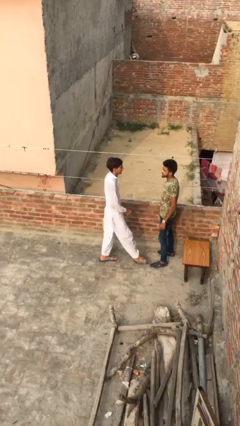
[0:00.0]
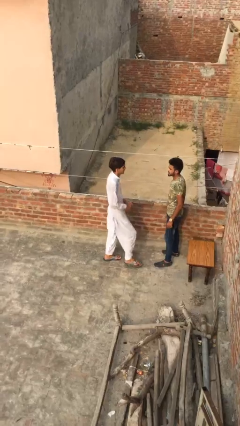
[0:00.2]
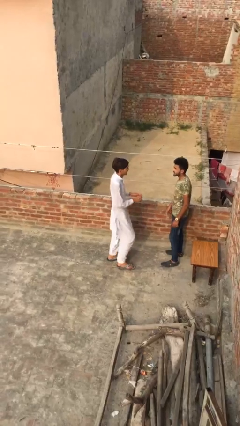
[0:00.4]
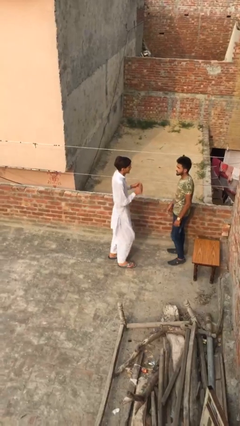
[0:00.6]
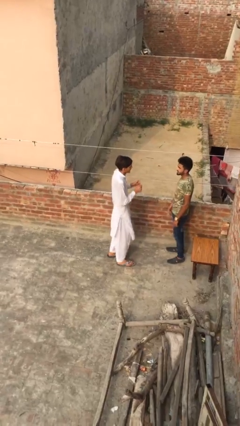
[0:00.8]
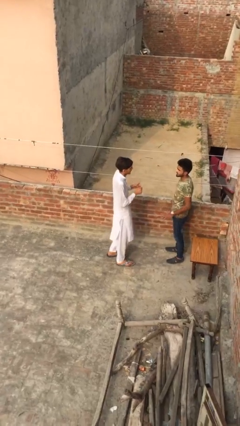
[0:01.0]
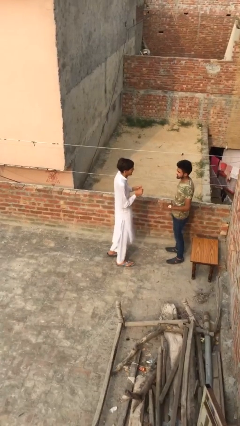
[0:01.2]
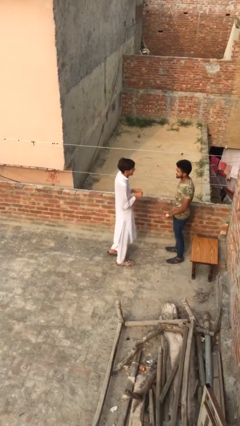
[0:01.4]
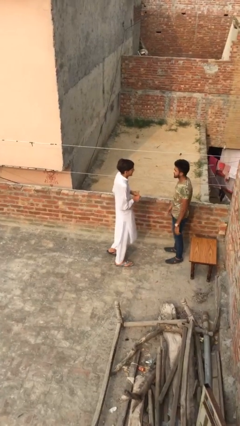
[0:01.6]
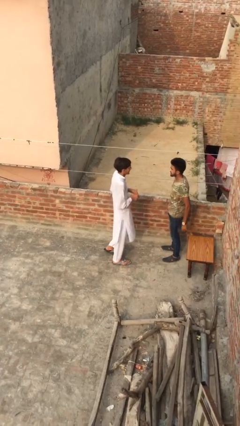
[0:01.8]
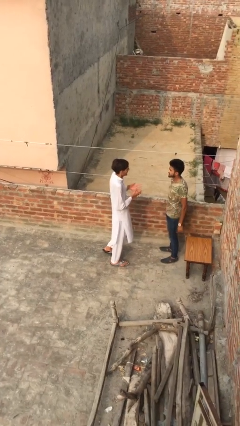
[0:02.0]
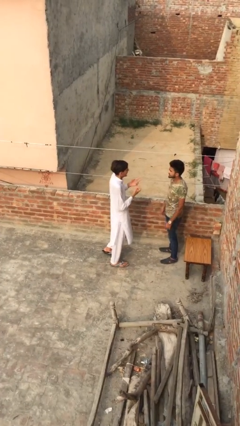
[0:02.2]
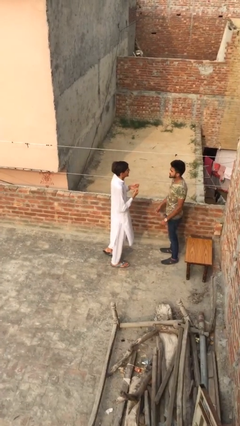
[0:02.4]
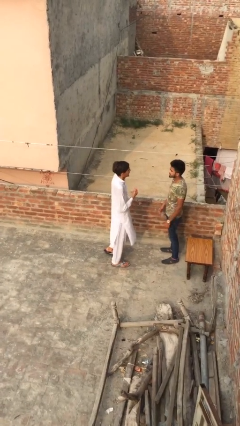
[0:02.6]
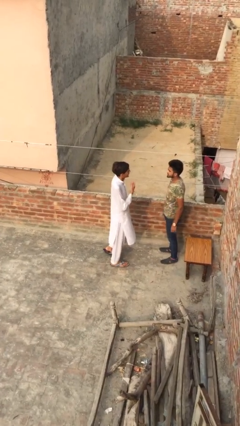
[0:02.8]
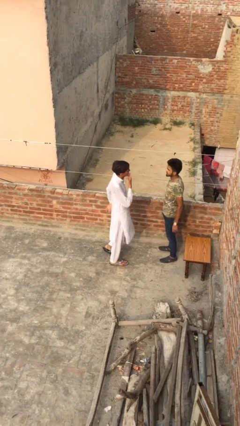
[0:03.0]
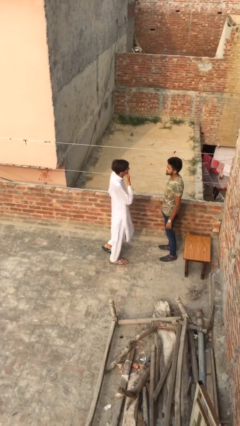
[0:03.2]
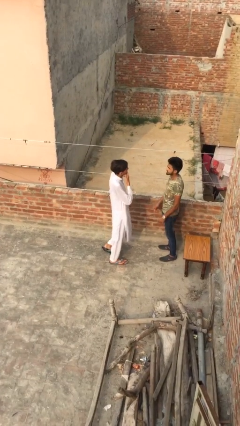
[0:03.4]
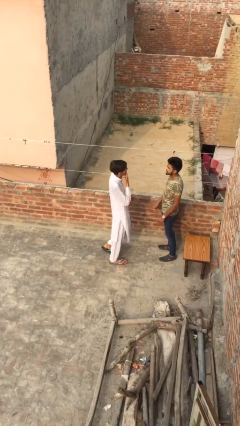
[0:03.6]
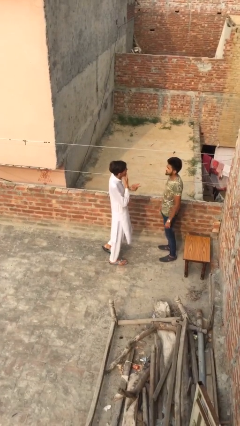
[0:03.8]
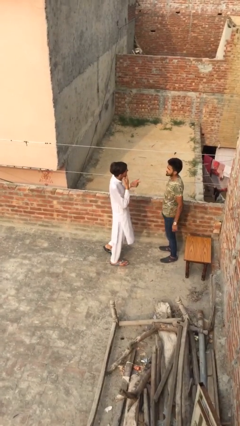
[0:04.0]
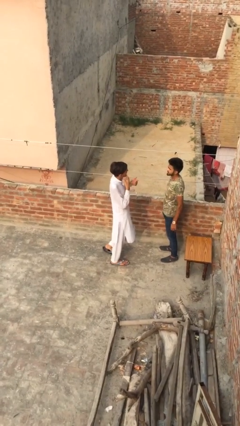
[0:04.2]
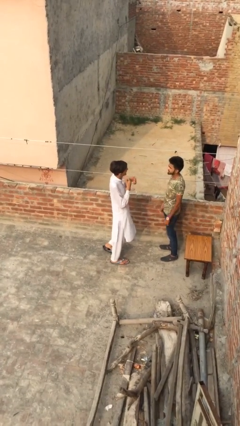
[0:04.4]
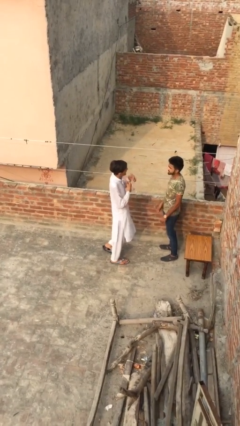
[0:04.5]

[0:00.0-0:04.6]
person talks to person

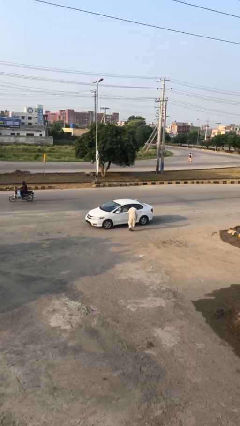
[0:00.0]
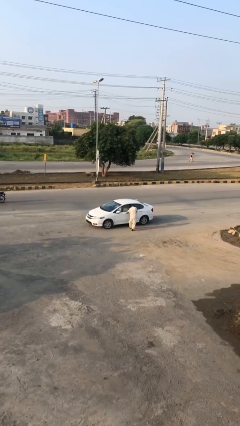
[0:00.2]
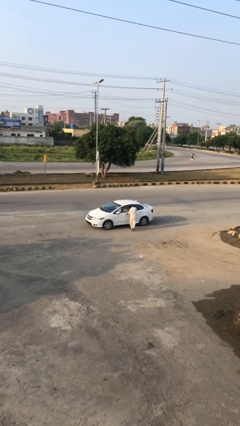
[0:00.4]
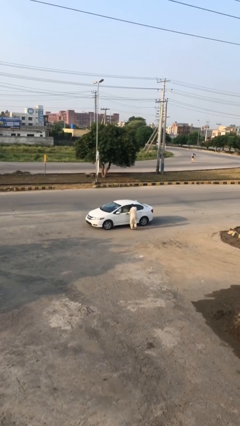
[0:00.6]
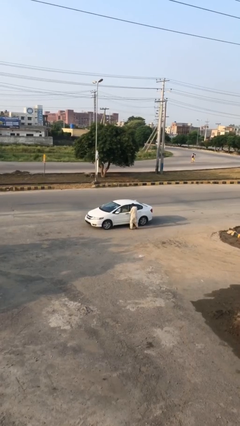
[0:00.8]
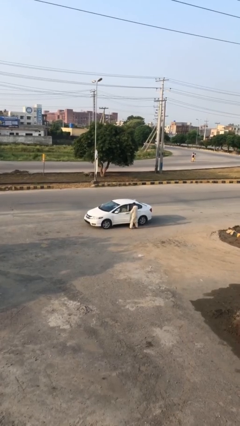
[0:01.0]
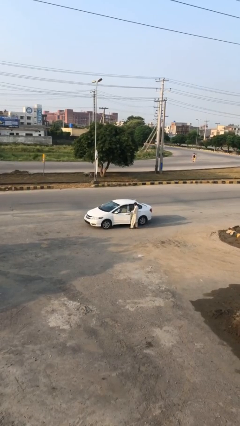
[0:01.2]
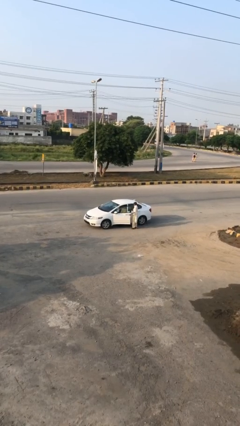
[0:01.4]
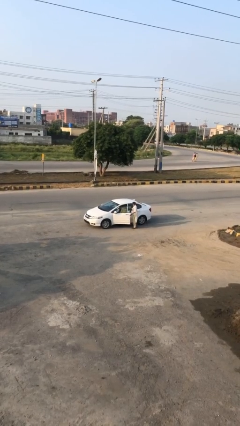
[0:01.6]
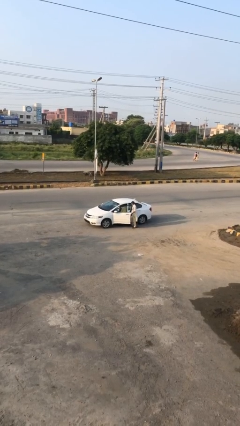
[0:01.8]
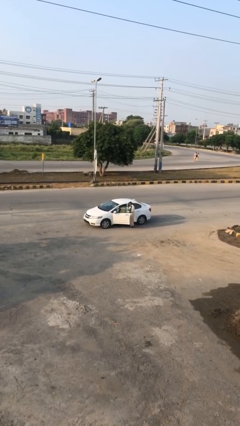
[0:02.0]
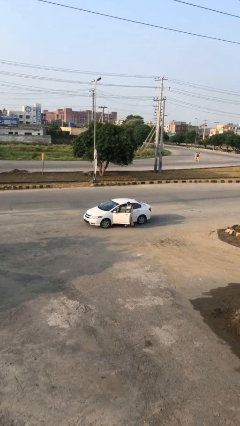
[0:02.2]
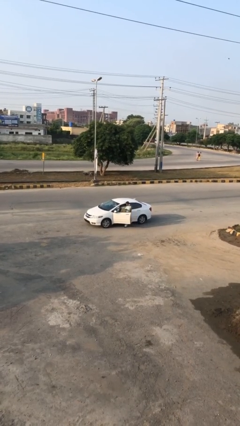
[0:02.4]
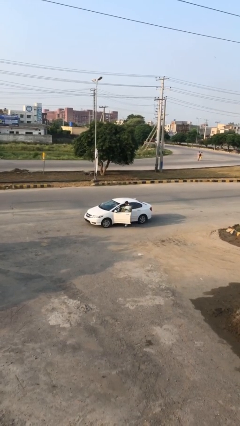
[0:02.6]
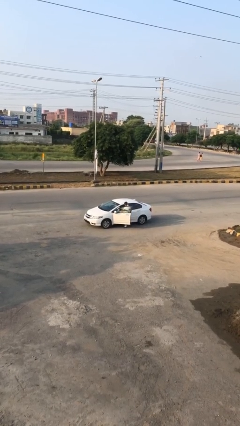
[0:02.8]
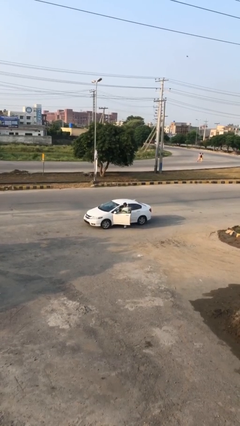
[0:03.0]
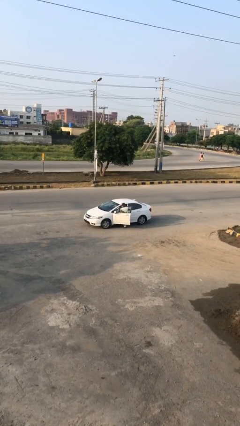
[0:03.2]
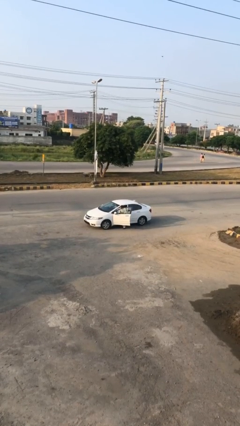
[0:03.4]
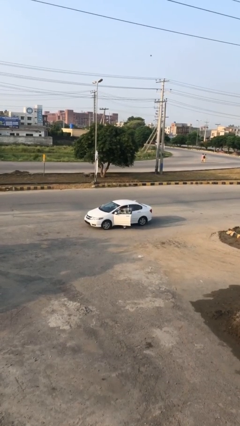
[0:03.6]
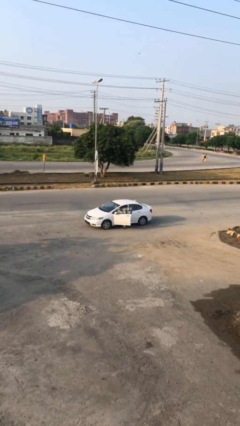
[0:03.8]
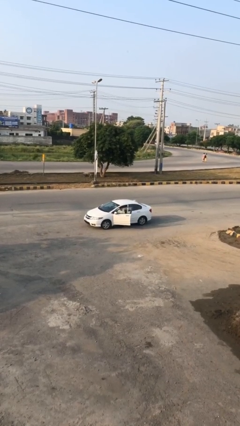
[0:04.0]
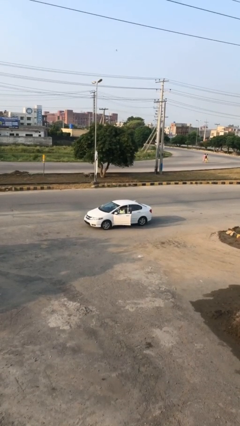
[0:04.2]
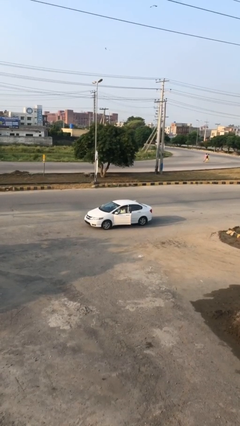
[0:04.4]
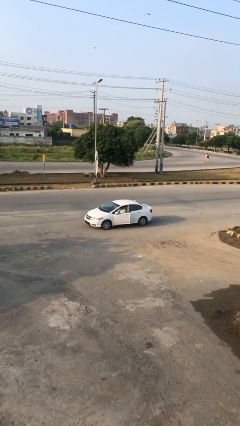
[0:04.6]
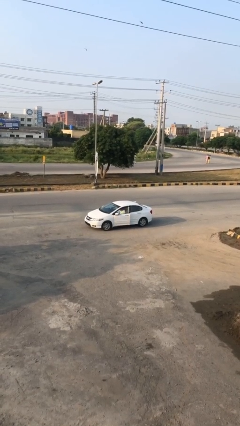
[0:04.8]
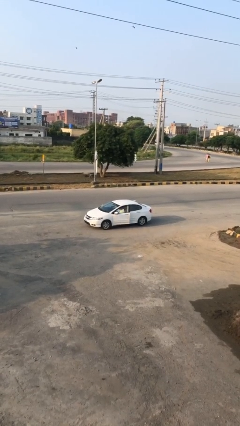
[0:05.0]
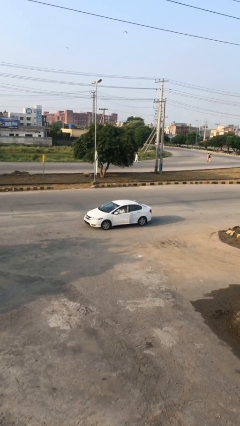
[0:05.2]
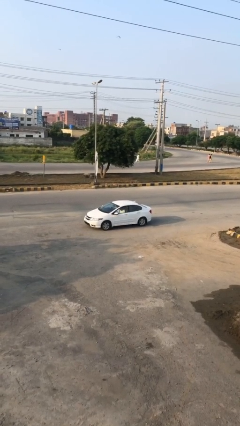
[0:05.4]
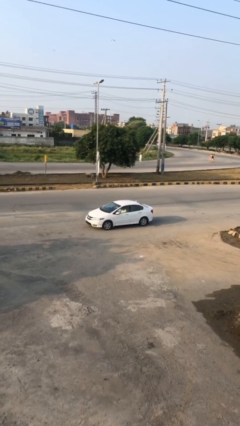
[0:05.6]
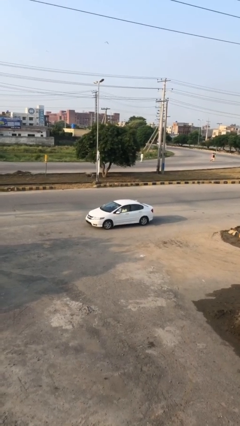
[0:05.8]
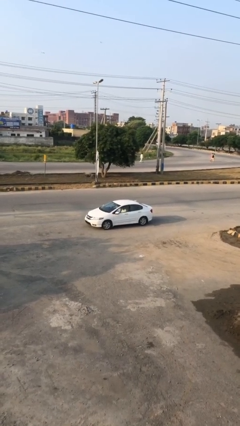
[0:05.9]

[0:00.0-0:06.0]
car picks up person

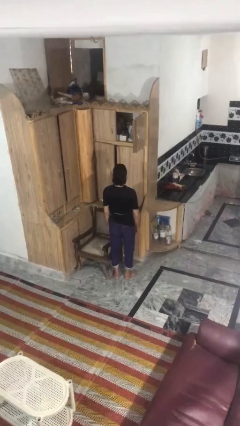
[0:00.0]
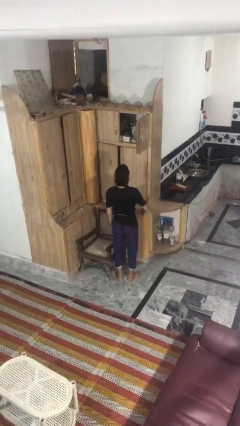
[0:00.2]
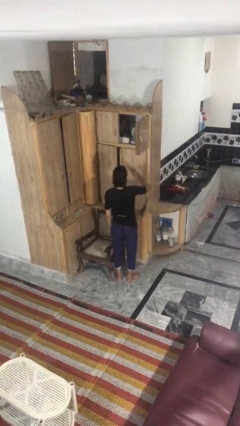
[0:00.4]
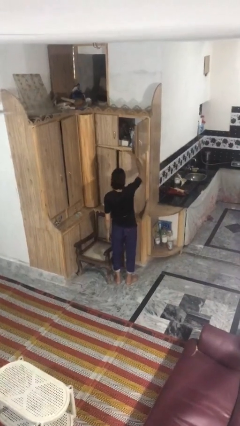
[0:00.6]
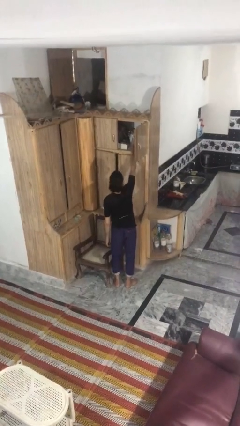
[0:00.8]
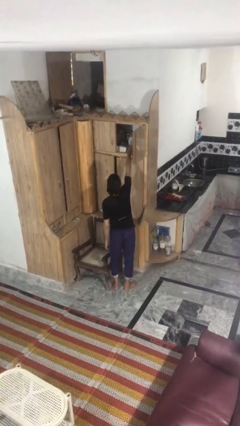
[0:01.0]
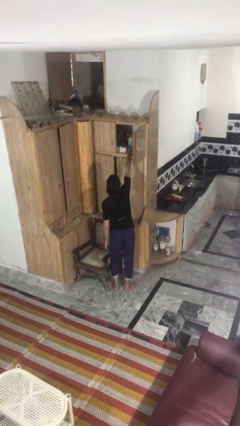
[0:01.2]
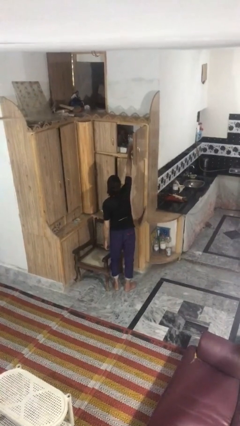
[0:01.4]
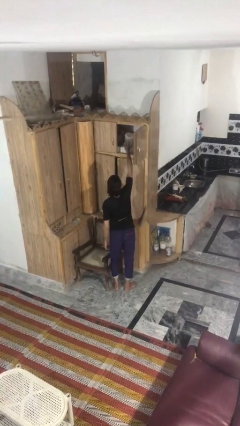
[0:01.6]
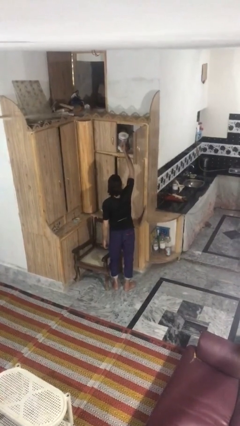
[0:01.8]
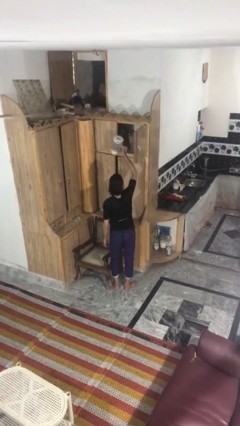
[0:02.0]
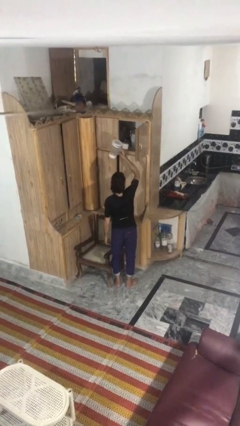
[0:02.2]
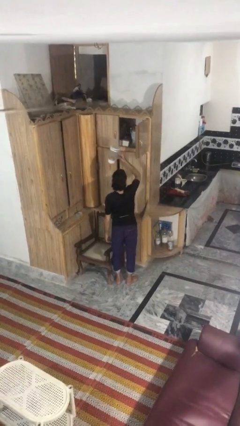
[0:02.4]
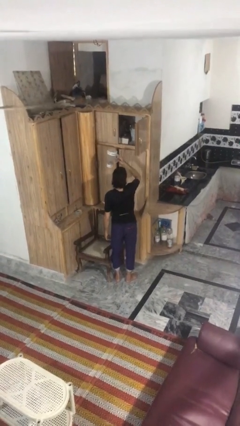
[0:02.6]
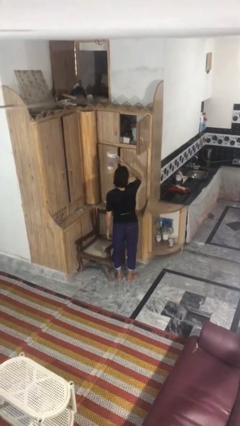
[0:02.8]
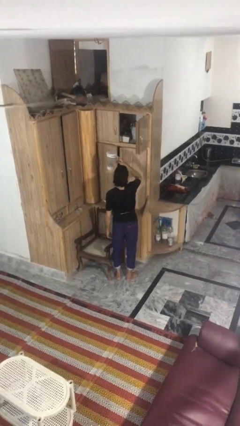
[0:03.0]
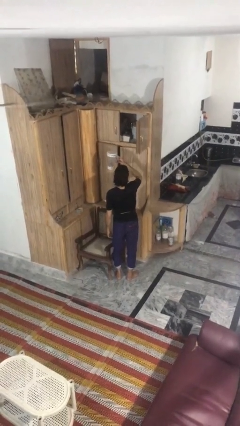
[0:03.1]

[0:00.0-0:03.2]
person picks up object from shelf

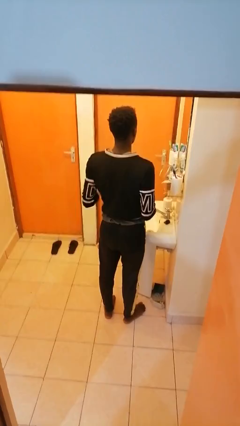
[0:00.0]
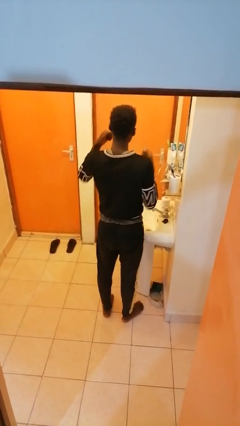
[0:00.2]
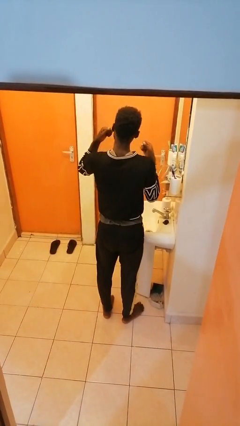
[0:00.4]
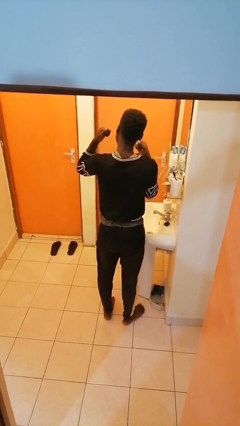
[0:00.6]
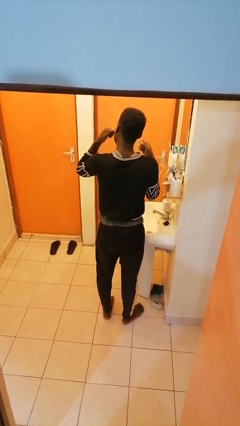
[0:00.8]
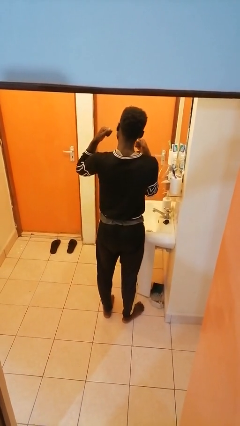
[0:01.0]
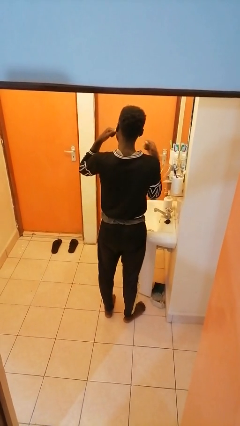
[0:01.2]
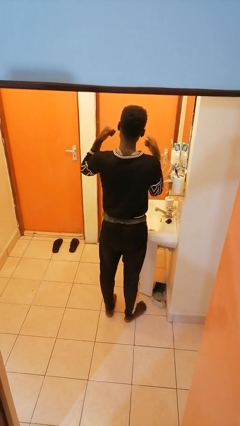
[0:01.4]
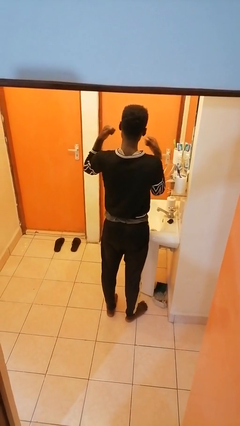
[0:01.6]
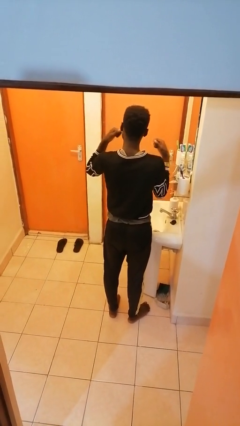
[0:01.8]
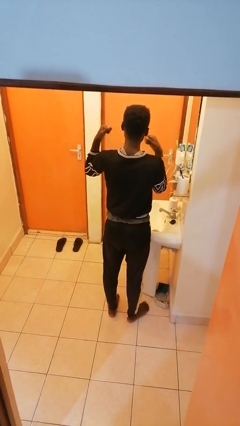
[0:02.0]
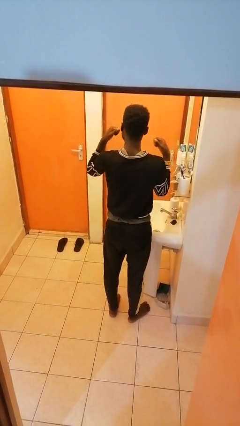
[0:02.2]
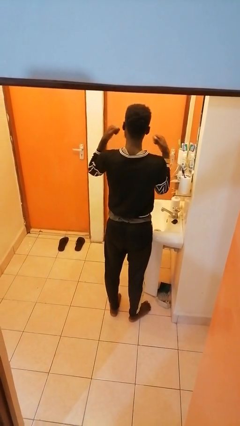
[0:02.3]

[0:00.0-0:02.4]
person flosses

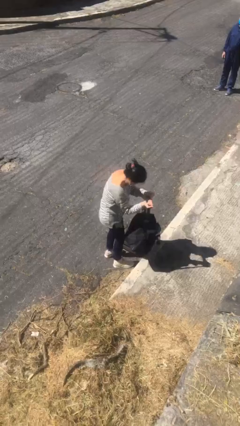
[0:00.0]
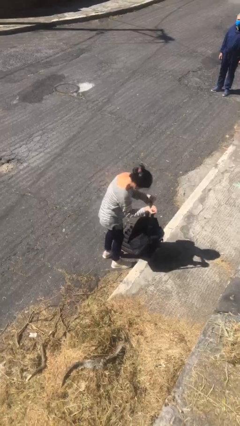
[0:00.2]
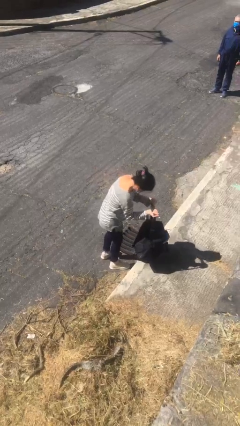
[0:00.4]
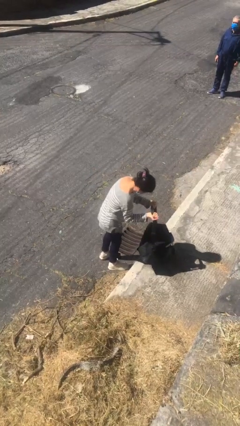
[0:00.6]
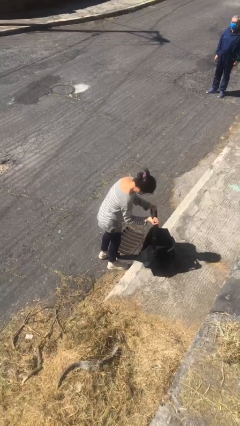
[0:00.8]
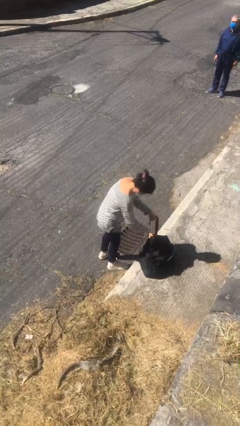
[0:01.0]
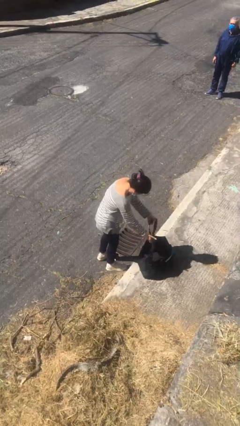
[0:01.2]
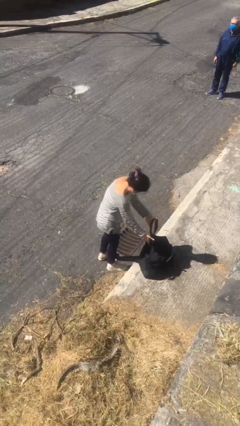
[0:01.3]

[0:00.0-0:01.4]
person puts down object on floor

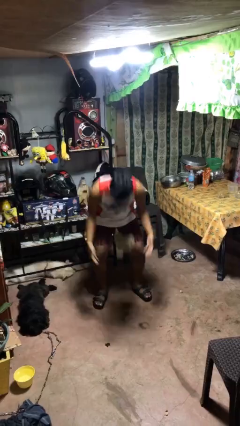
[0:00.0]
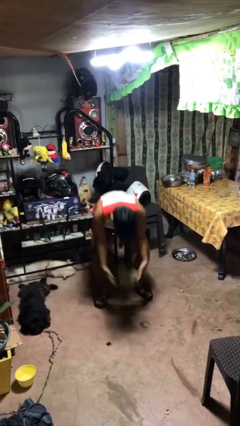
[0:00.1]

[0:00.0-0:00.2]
person drops object
